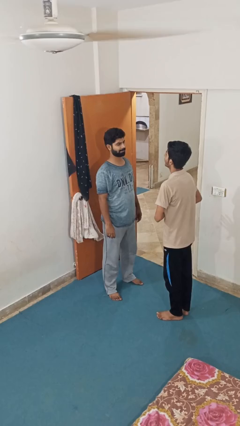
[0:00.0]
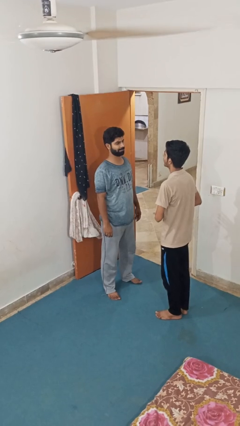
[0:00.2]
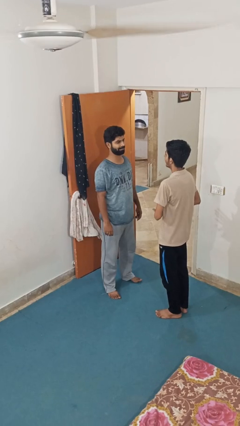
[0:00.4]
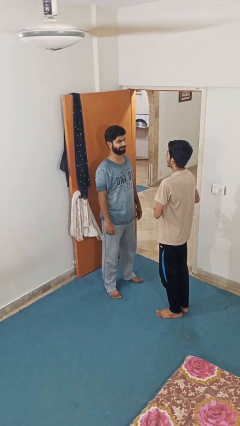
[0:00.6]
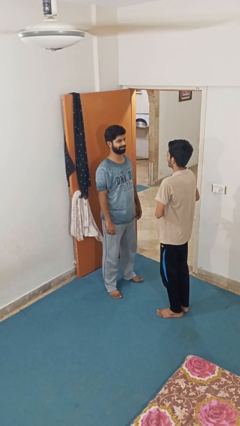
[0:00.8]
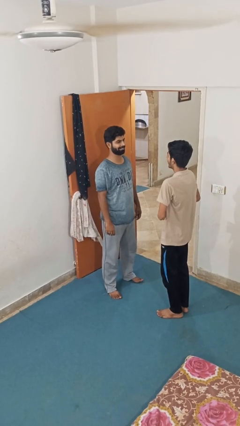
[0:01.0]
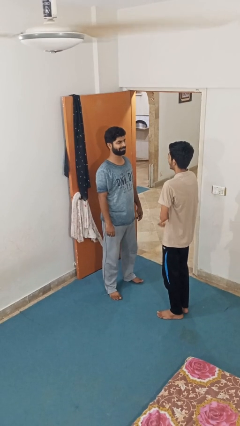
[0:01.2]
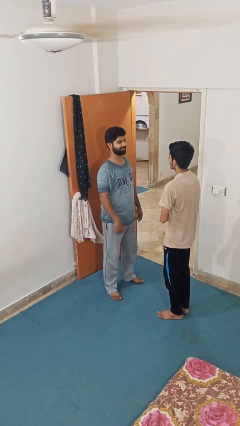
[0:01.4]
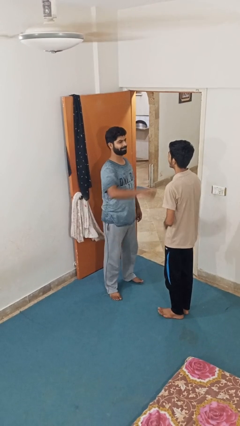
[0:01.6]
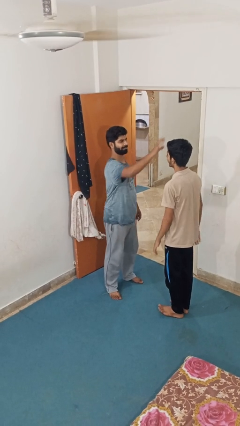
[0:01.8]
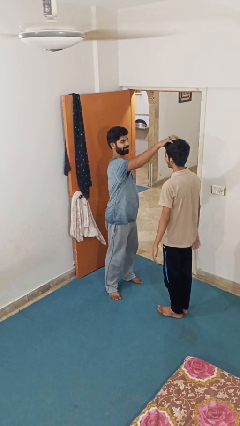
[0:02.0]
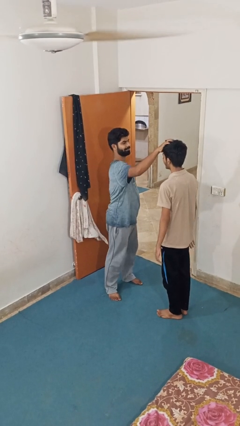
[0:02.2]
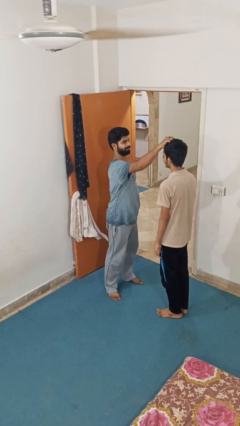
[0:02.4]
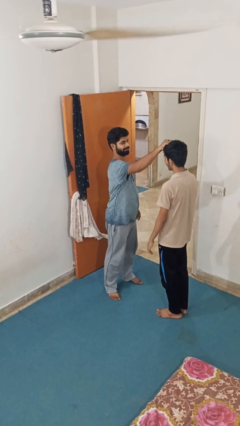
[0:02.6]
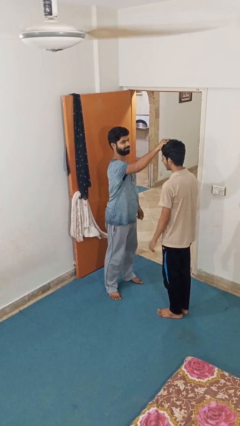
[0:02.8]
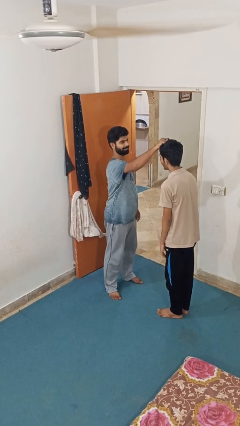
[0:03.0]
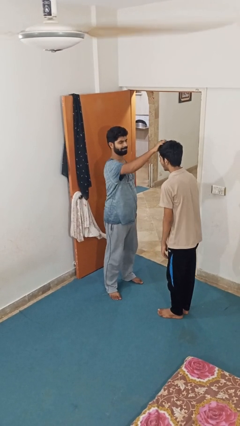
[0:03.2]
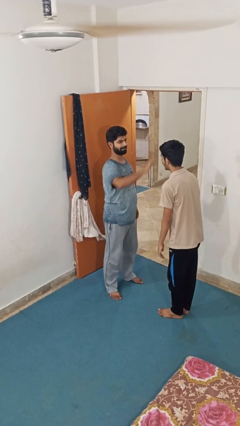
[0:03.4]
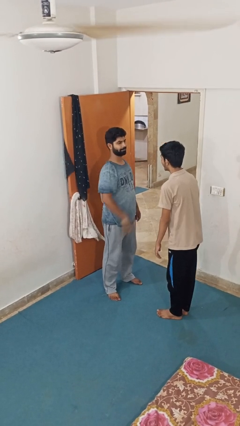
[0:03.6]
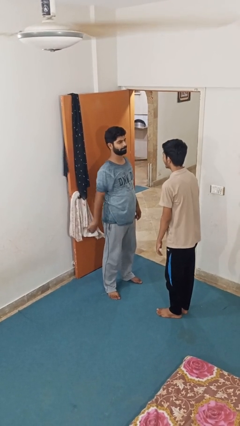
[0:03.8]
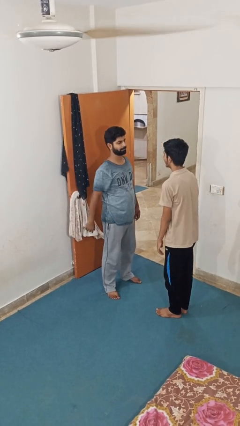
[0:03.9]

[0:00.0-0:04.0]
person grabs person by hair

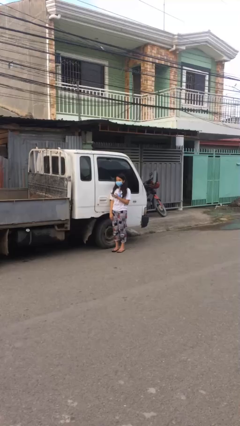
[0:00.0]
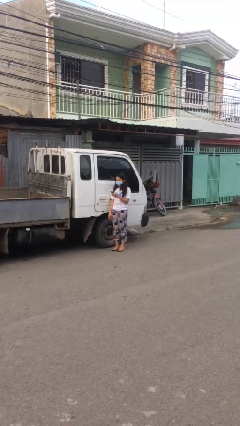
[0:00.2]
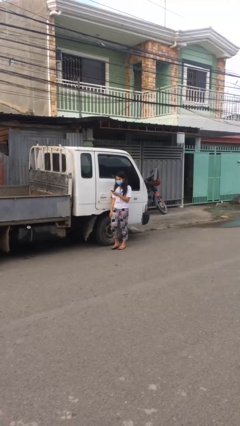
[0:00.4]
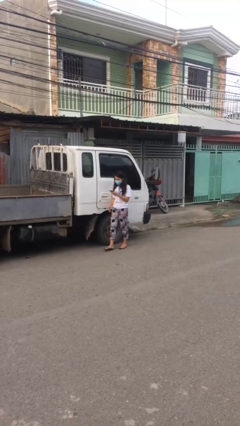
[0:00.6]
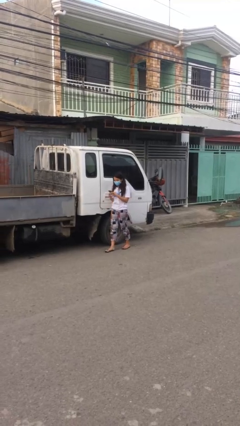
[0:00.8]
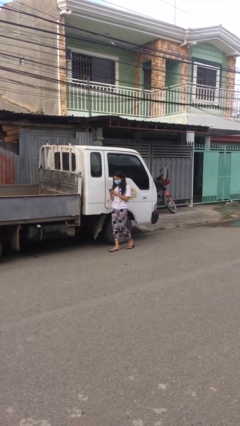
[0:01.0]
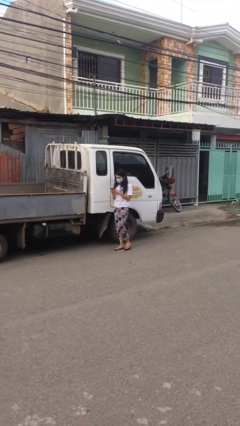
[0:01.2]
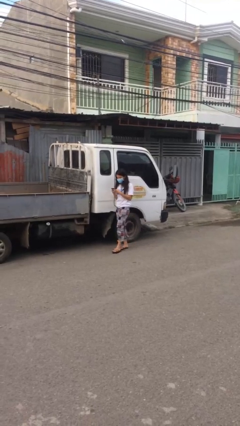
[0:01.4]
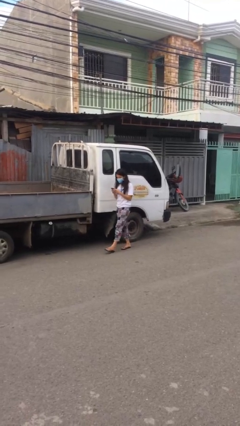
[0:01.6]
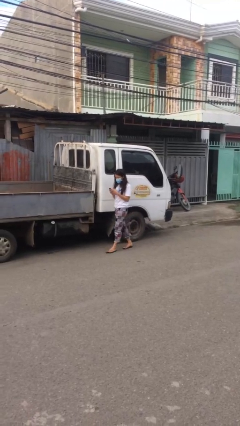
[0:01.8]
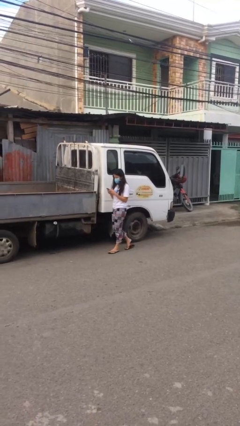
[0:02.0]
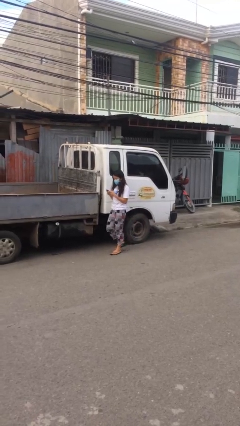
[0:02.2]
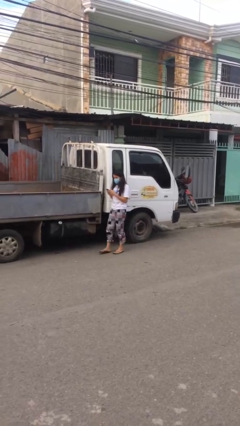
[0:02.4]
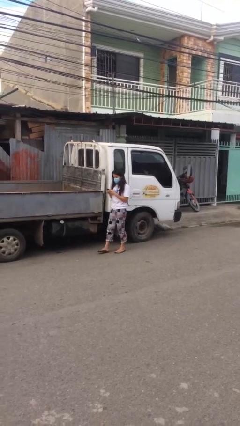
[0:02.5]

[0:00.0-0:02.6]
person texts on phone

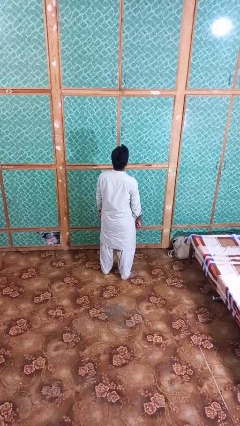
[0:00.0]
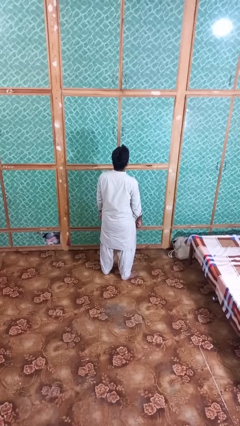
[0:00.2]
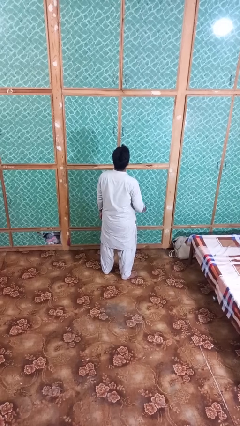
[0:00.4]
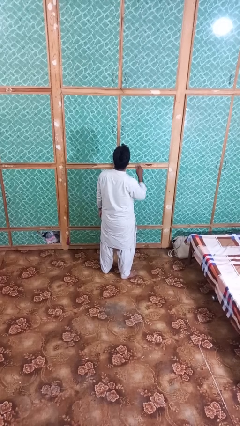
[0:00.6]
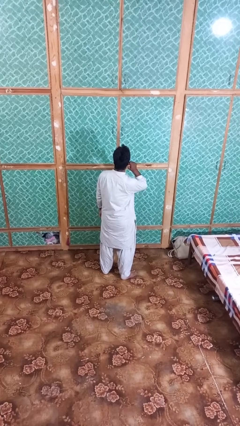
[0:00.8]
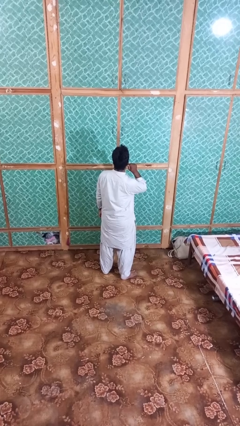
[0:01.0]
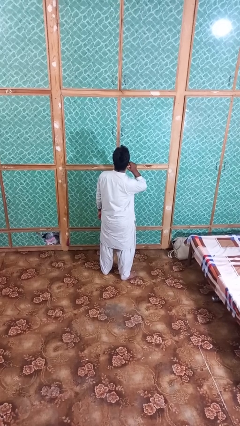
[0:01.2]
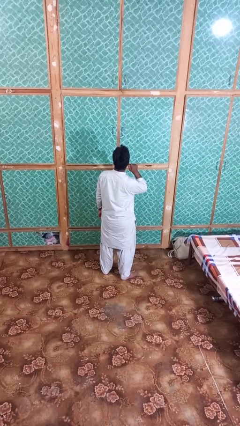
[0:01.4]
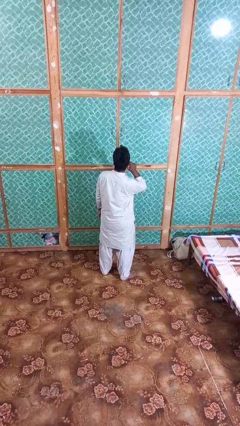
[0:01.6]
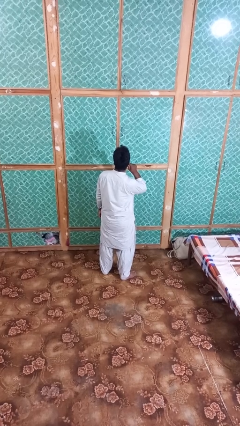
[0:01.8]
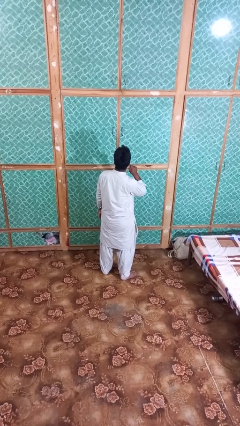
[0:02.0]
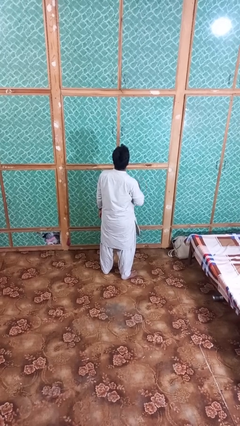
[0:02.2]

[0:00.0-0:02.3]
person touches earlobe

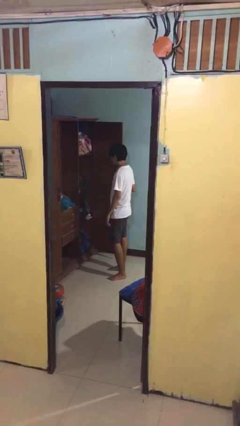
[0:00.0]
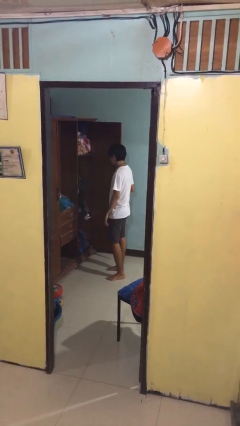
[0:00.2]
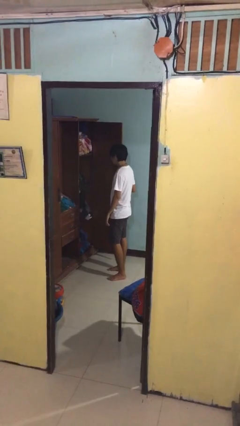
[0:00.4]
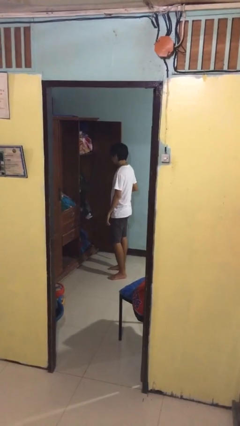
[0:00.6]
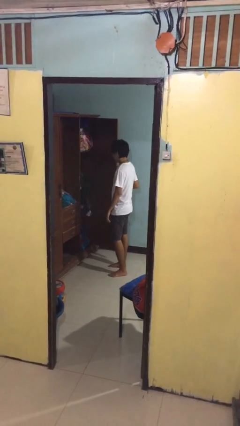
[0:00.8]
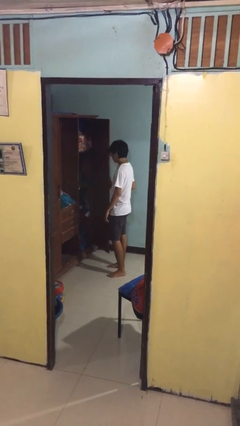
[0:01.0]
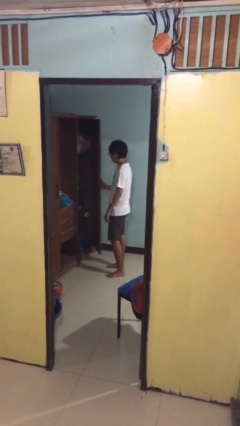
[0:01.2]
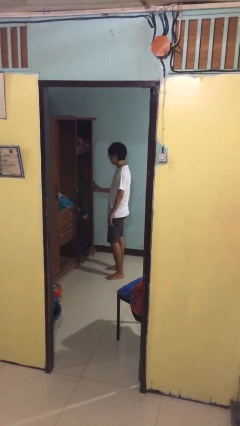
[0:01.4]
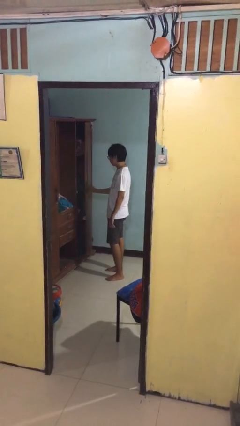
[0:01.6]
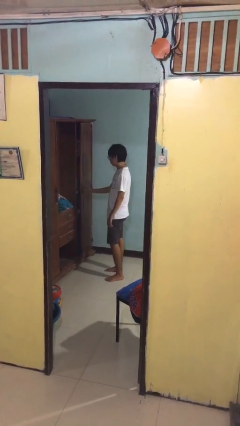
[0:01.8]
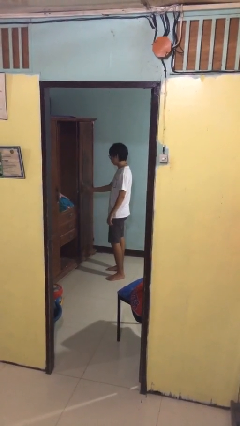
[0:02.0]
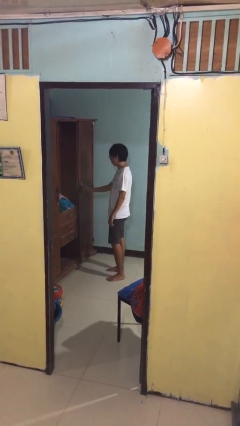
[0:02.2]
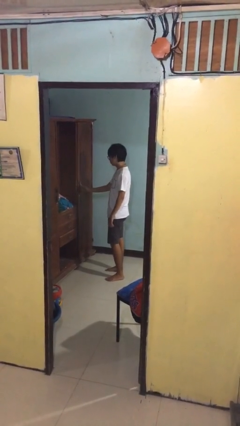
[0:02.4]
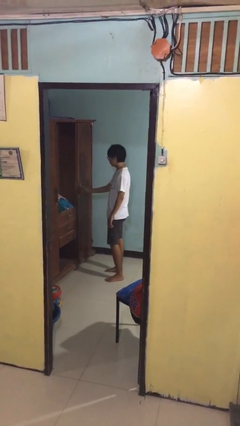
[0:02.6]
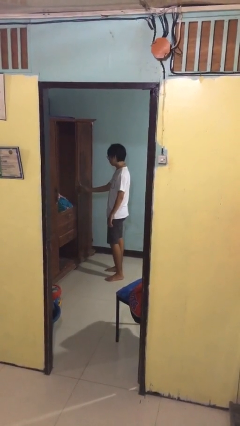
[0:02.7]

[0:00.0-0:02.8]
person closes closet door

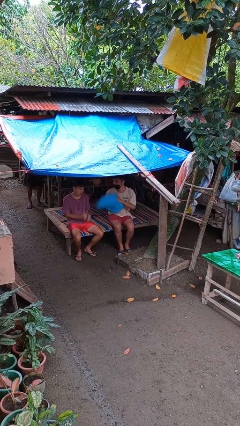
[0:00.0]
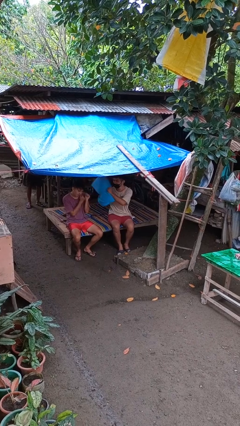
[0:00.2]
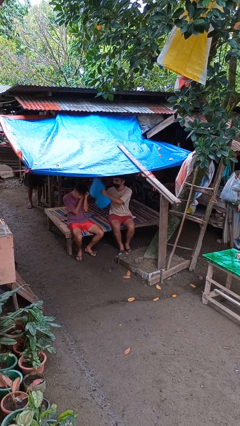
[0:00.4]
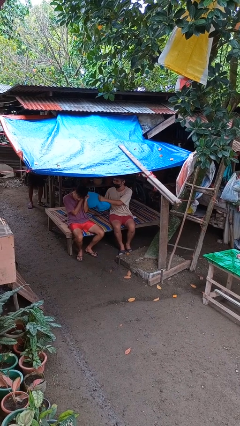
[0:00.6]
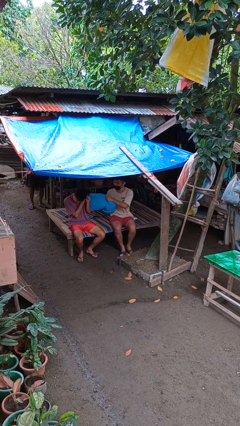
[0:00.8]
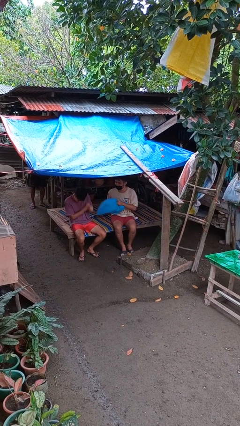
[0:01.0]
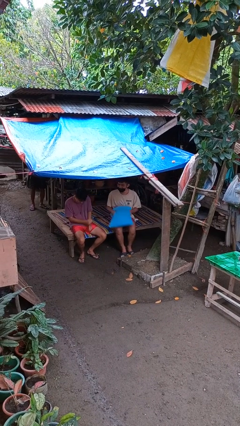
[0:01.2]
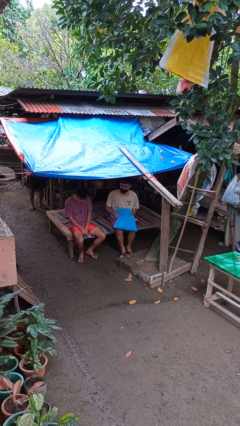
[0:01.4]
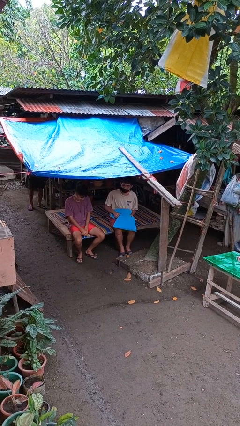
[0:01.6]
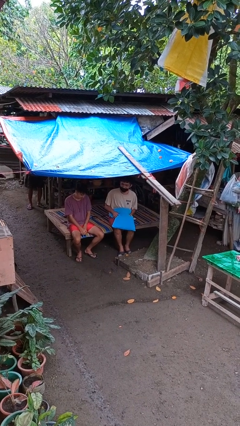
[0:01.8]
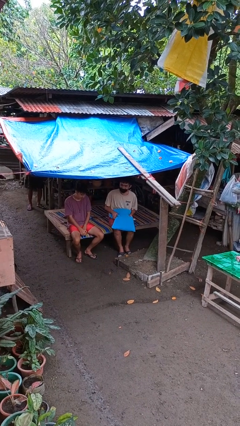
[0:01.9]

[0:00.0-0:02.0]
person hits person with pillow

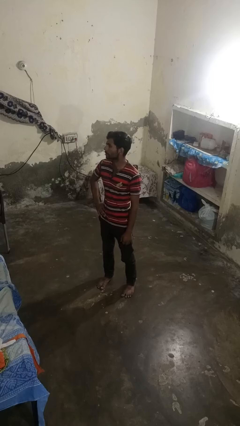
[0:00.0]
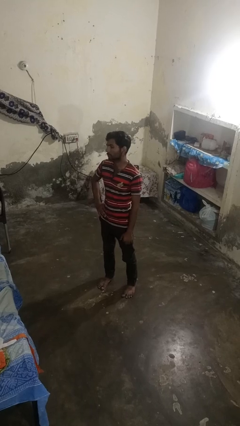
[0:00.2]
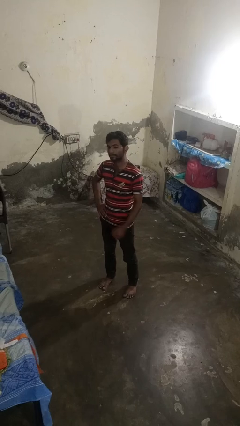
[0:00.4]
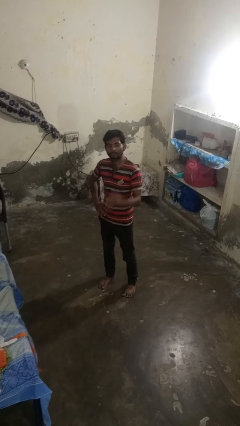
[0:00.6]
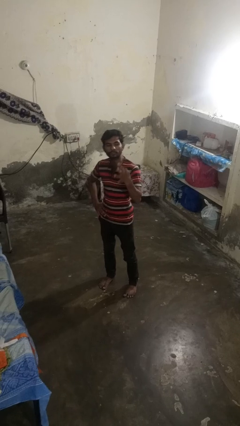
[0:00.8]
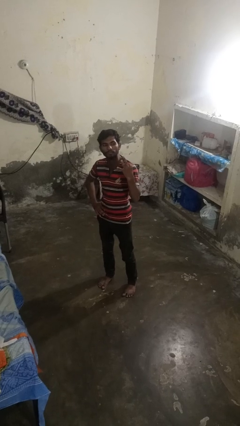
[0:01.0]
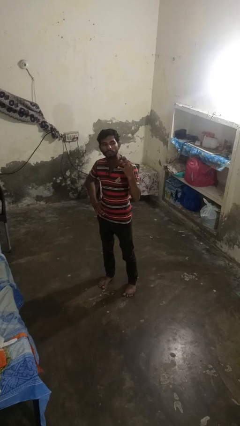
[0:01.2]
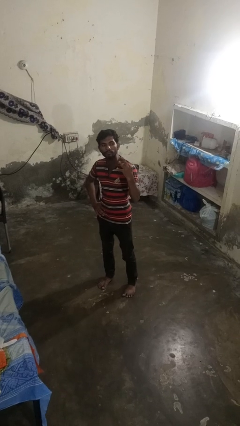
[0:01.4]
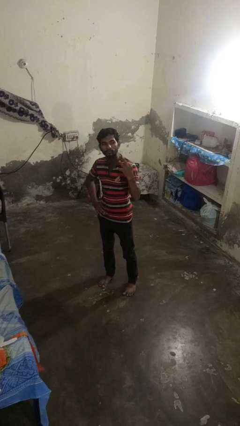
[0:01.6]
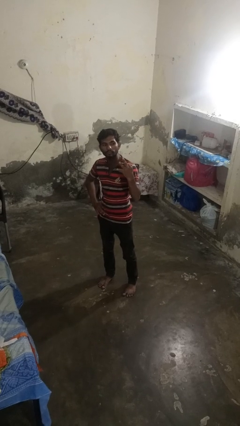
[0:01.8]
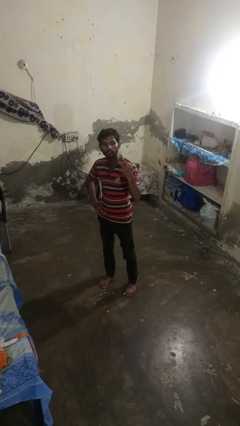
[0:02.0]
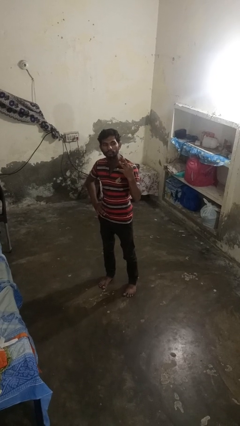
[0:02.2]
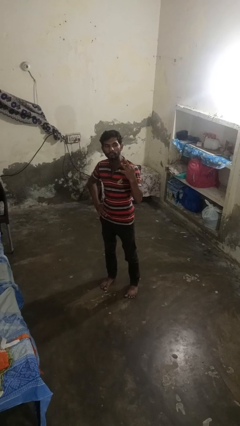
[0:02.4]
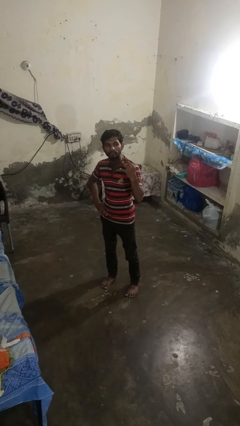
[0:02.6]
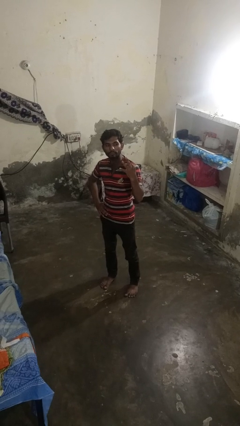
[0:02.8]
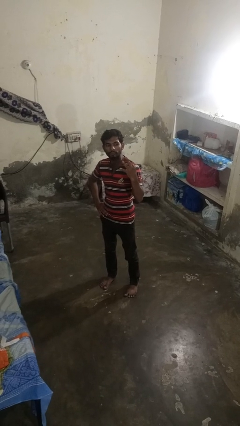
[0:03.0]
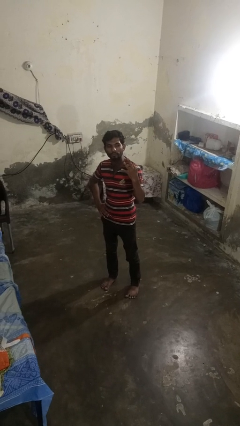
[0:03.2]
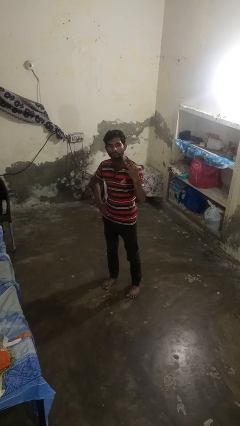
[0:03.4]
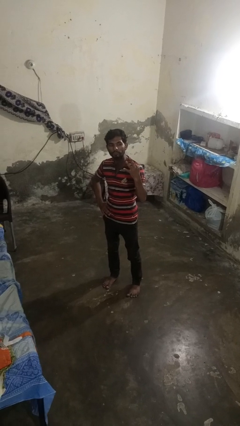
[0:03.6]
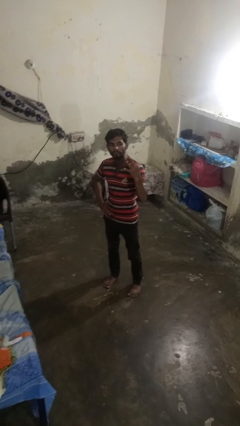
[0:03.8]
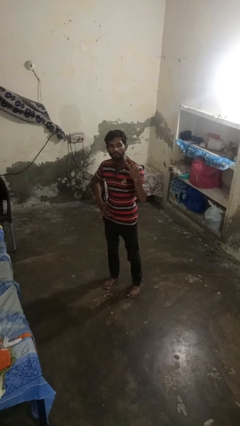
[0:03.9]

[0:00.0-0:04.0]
person gestures number three
